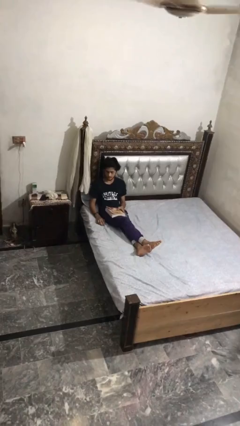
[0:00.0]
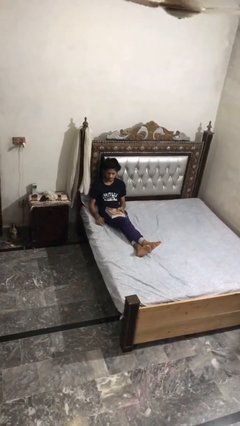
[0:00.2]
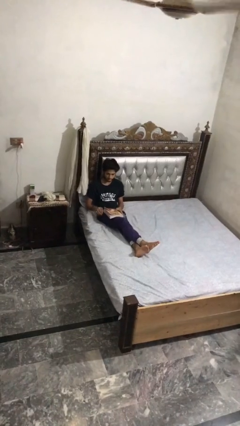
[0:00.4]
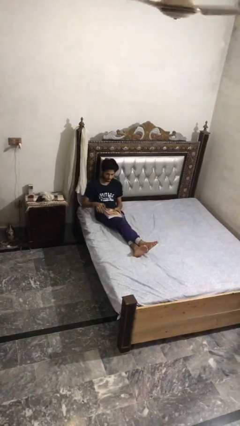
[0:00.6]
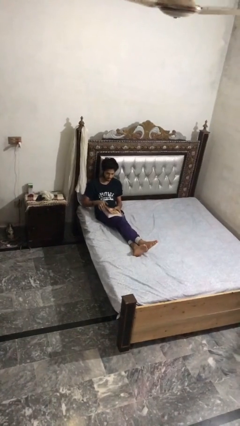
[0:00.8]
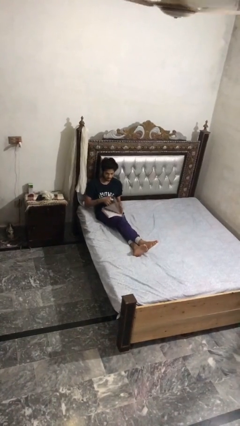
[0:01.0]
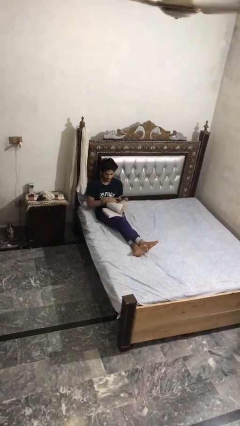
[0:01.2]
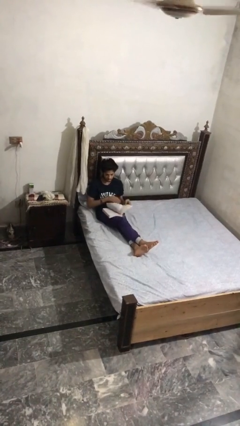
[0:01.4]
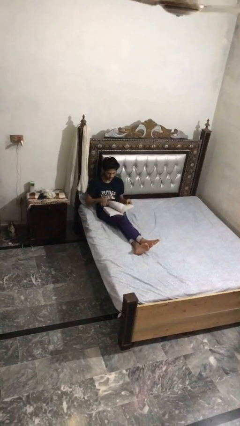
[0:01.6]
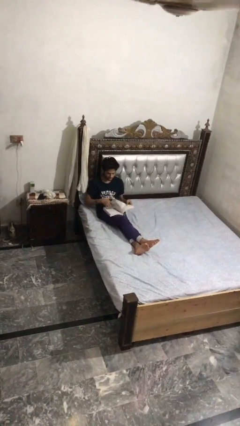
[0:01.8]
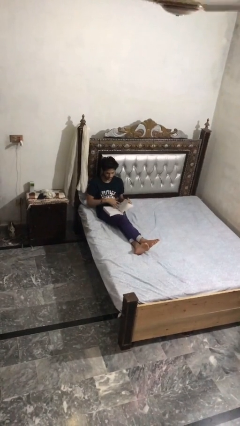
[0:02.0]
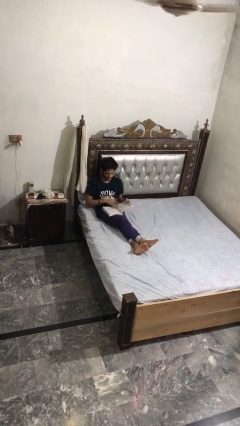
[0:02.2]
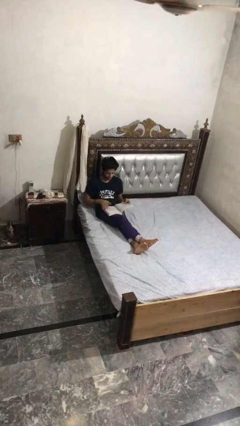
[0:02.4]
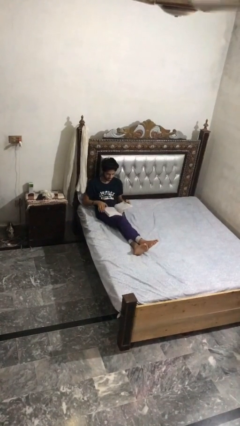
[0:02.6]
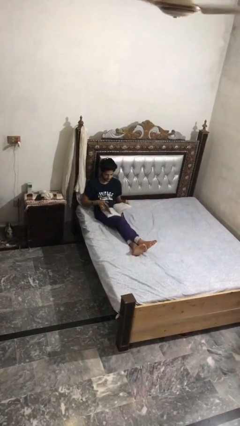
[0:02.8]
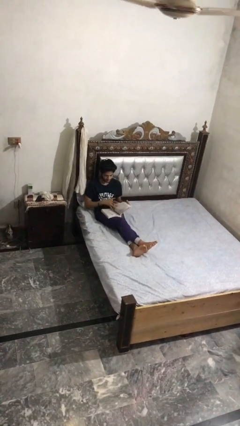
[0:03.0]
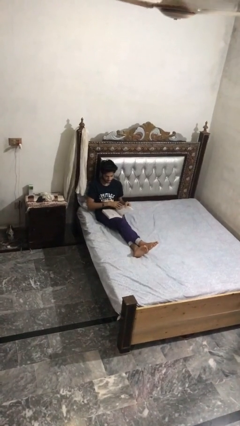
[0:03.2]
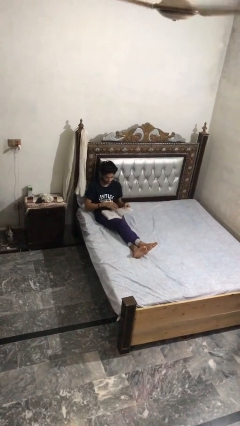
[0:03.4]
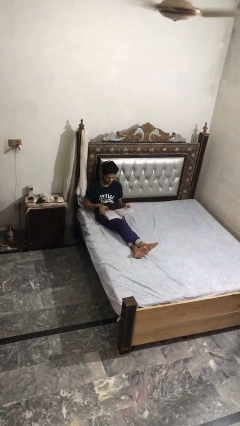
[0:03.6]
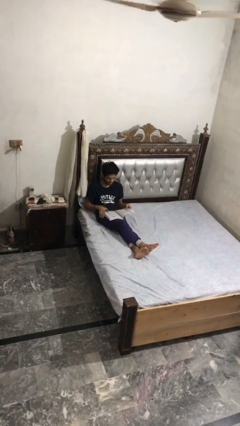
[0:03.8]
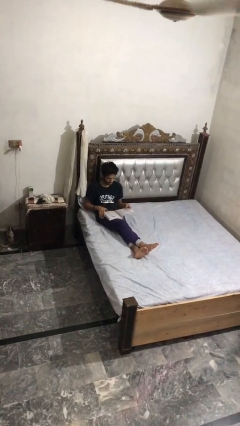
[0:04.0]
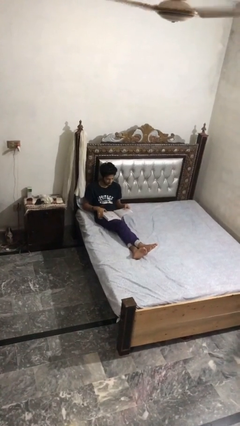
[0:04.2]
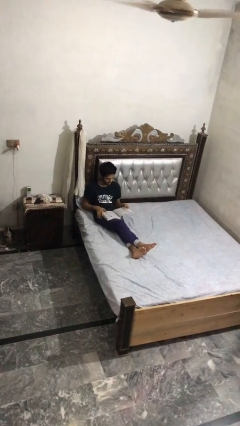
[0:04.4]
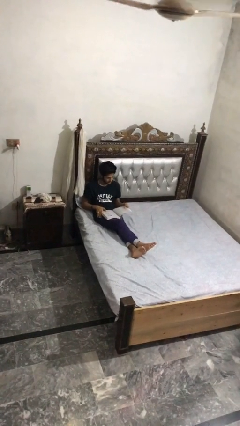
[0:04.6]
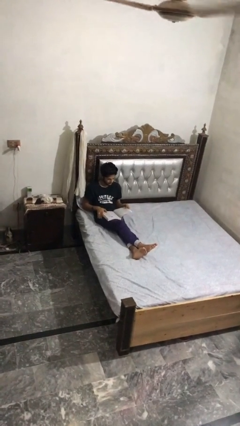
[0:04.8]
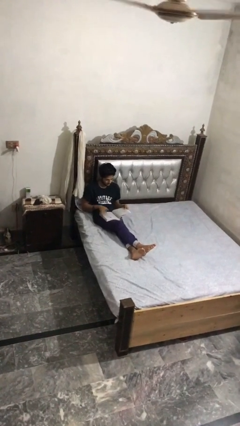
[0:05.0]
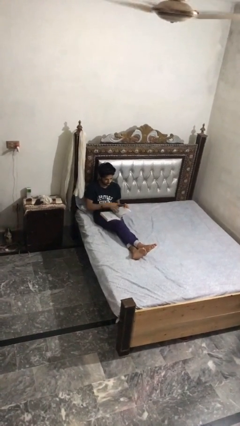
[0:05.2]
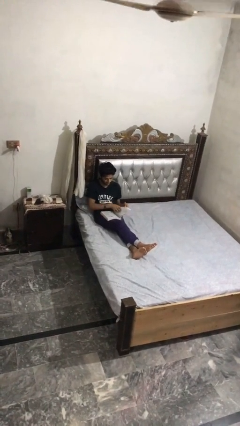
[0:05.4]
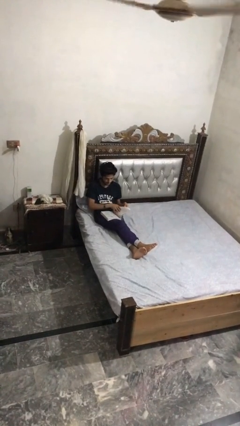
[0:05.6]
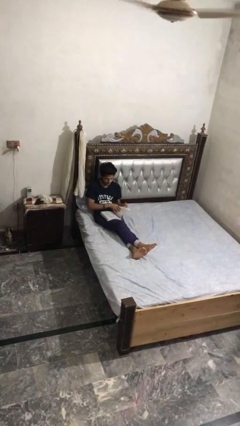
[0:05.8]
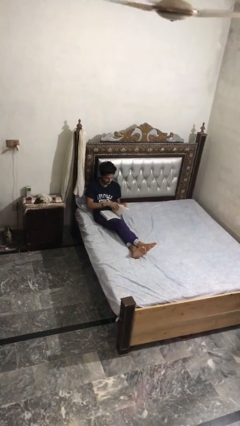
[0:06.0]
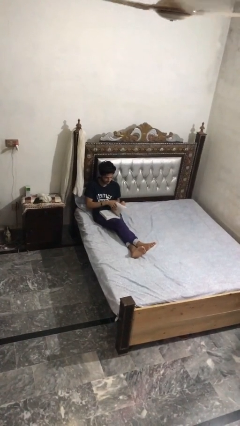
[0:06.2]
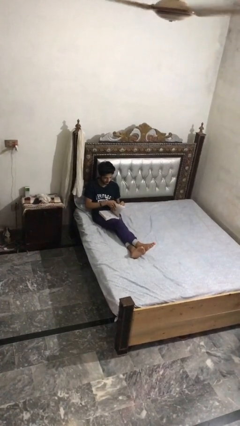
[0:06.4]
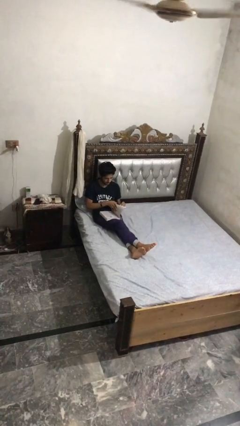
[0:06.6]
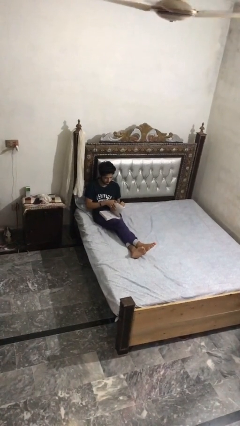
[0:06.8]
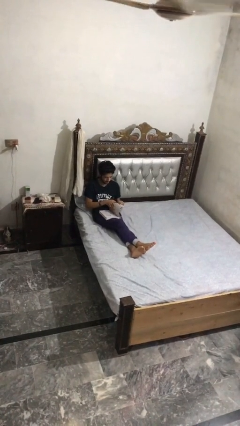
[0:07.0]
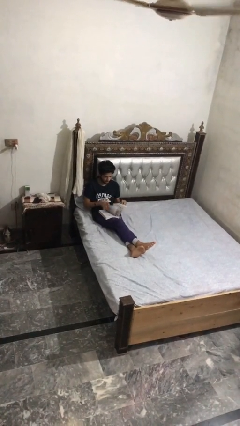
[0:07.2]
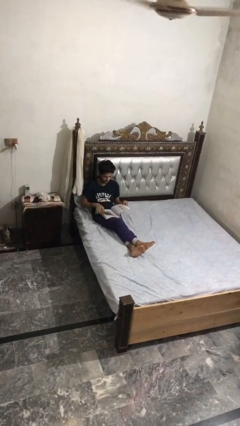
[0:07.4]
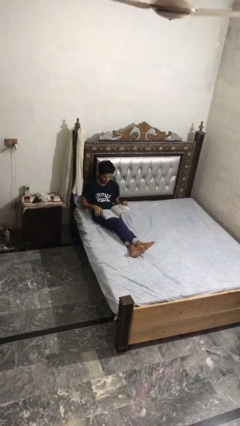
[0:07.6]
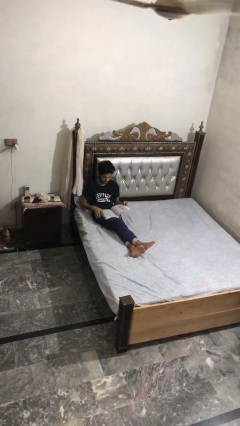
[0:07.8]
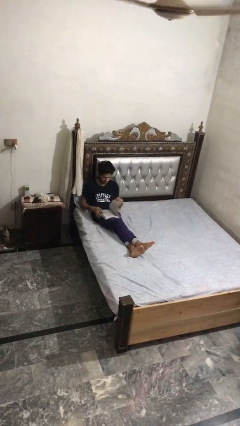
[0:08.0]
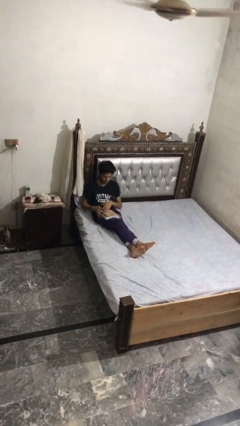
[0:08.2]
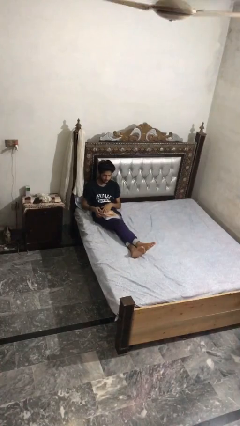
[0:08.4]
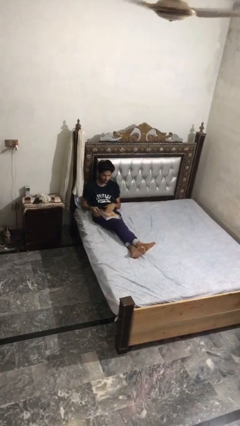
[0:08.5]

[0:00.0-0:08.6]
person reads book

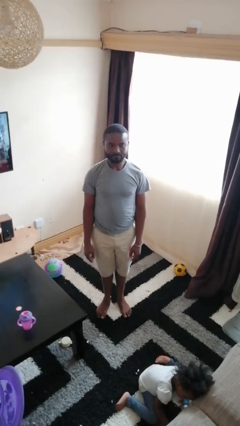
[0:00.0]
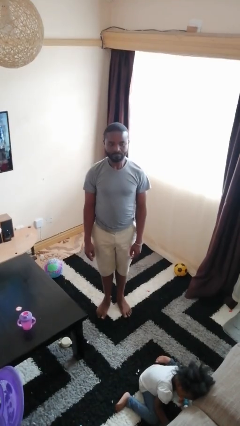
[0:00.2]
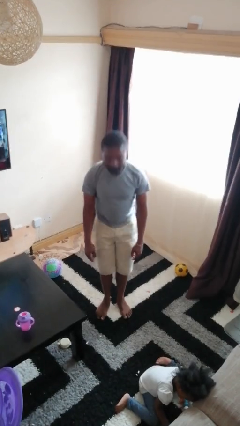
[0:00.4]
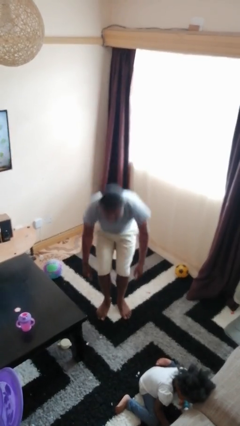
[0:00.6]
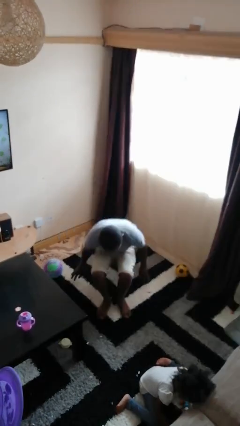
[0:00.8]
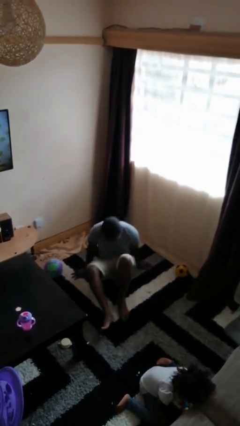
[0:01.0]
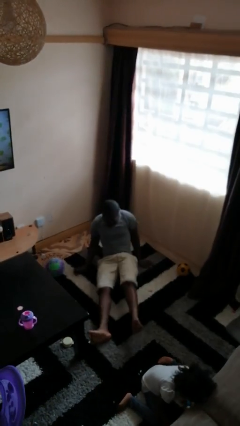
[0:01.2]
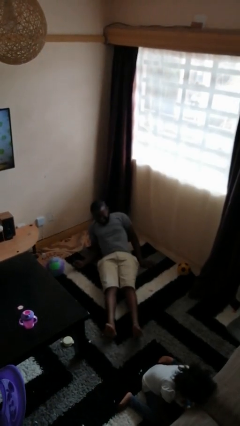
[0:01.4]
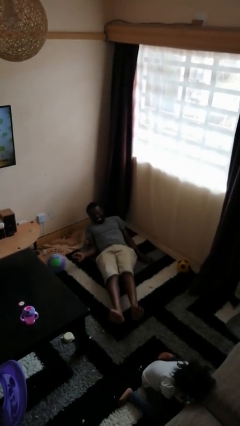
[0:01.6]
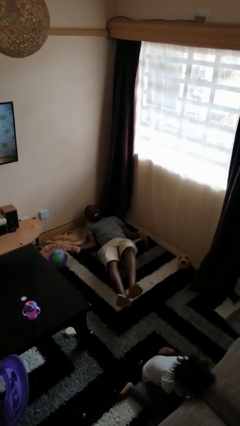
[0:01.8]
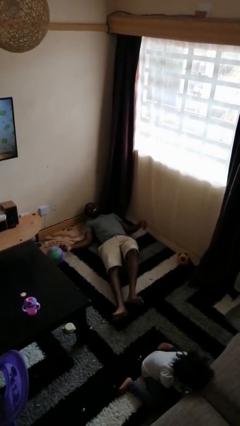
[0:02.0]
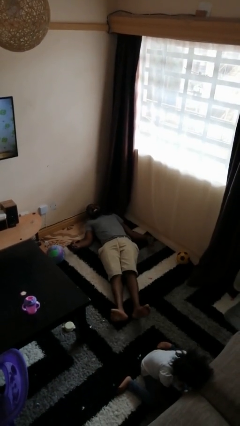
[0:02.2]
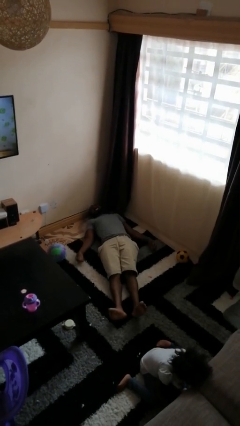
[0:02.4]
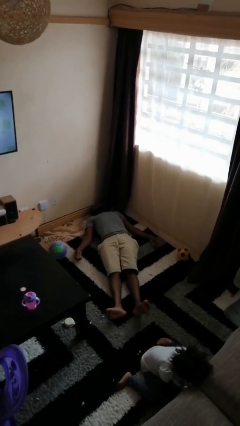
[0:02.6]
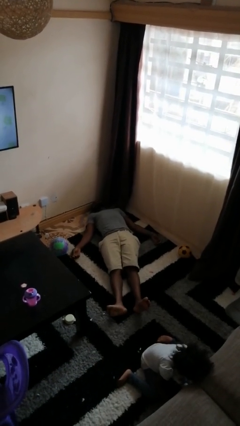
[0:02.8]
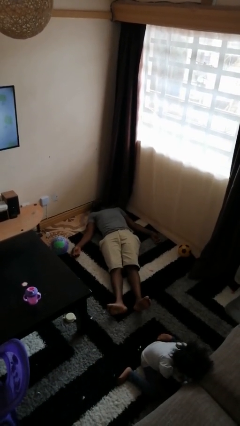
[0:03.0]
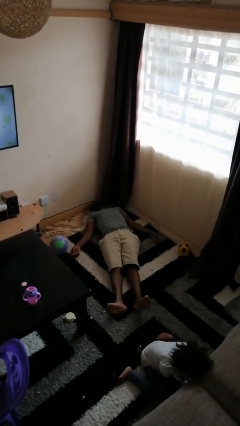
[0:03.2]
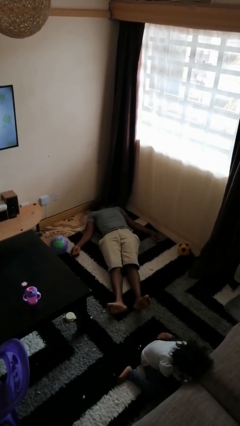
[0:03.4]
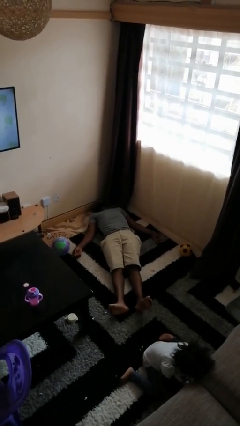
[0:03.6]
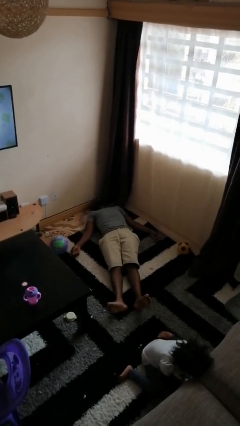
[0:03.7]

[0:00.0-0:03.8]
person falls while standing

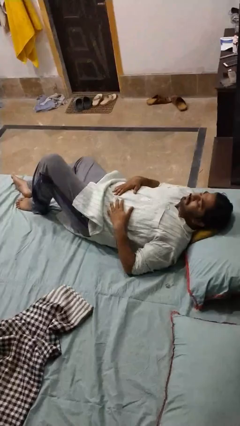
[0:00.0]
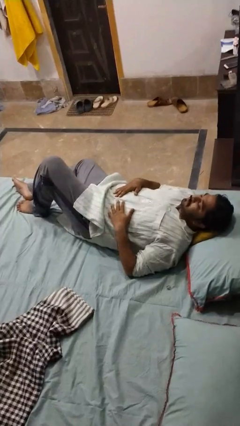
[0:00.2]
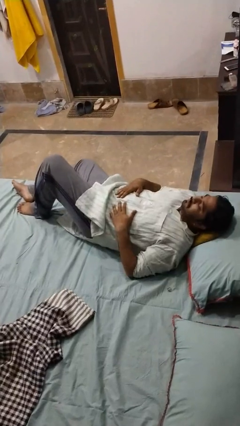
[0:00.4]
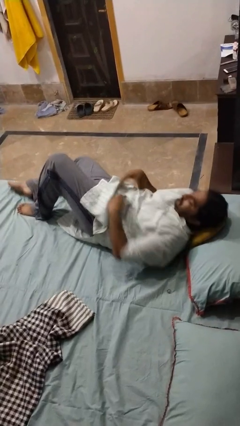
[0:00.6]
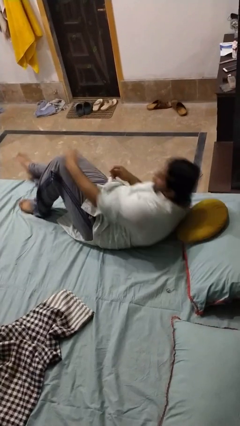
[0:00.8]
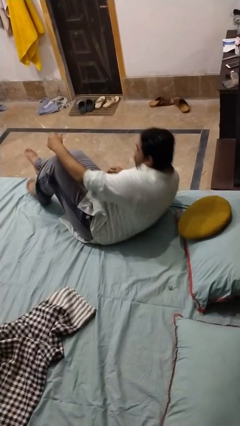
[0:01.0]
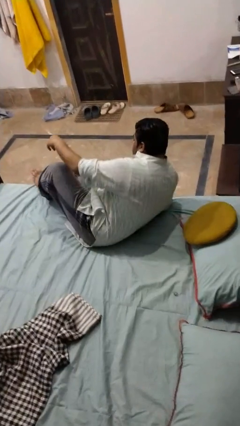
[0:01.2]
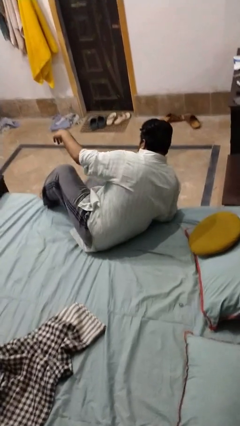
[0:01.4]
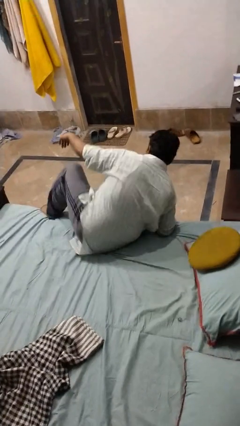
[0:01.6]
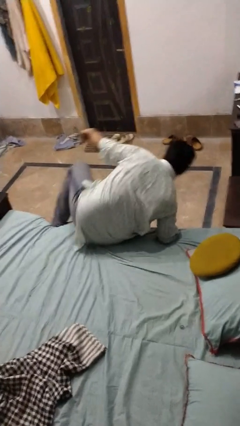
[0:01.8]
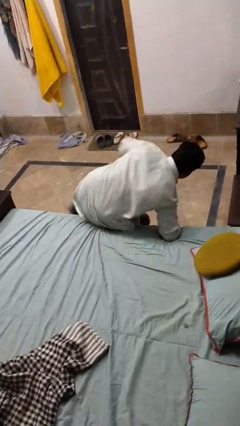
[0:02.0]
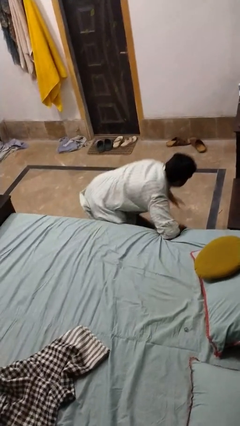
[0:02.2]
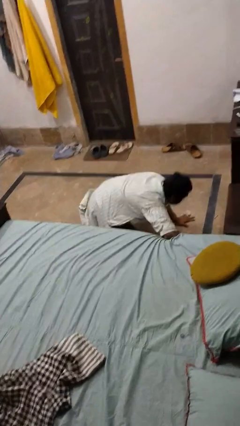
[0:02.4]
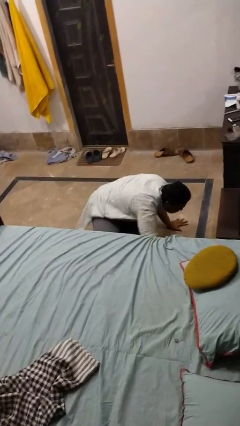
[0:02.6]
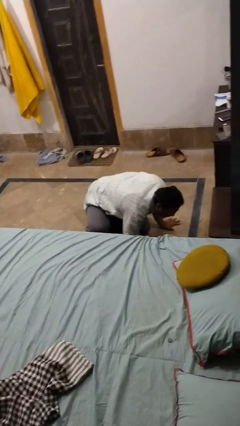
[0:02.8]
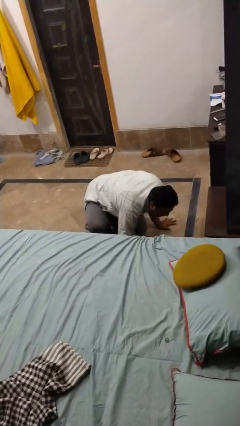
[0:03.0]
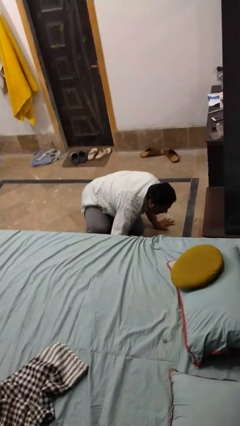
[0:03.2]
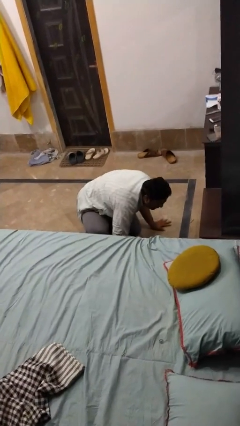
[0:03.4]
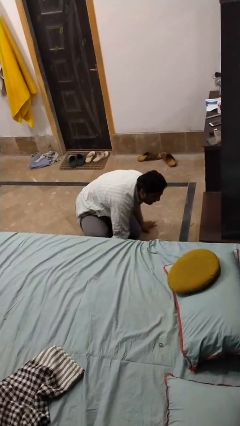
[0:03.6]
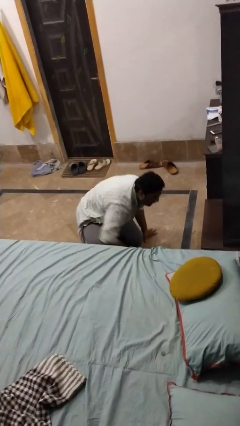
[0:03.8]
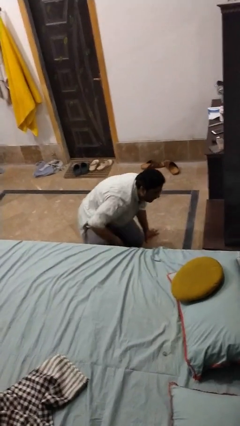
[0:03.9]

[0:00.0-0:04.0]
person falls from bed

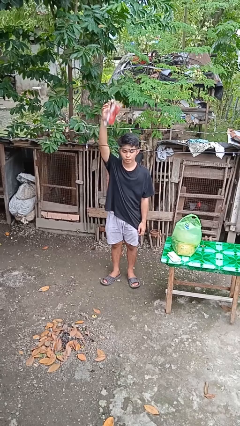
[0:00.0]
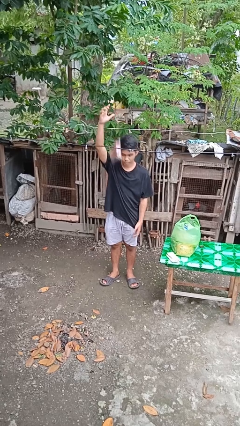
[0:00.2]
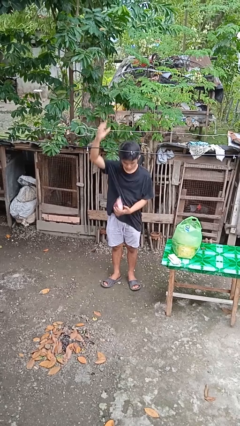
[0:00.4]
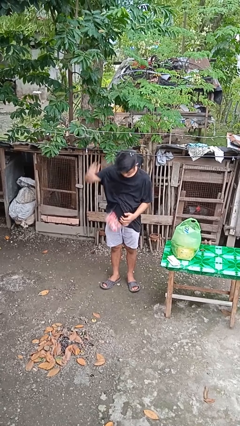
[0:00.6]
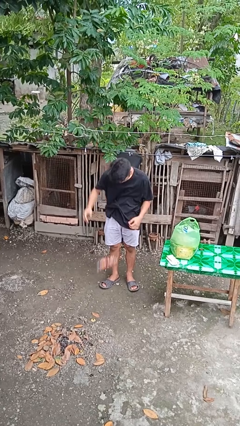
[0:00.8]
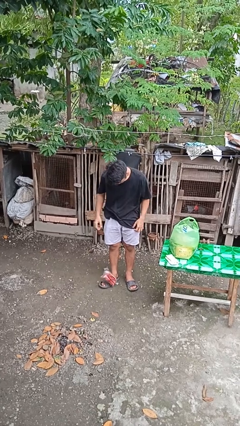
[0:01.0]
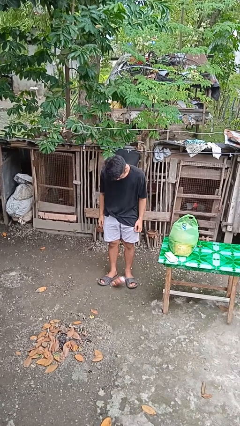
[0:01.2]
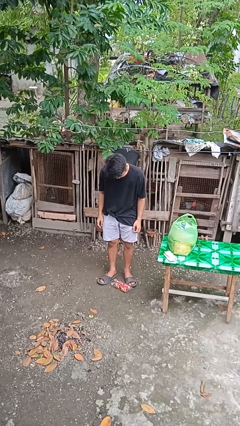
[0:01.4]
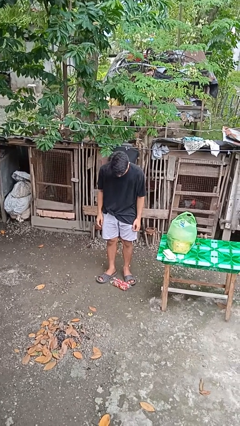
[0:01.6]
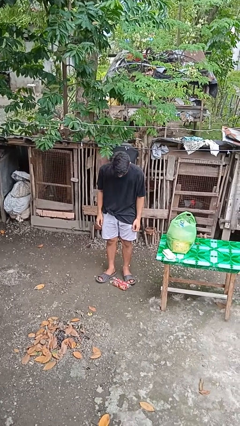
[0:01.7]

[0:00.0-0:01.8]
person drops object
